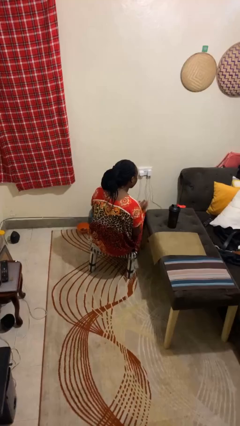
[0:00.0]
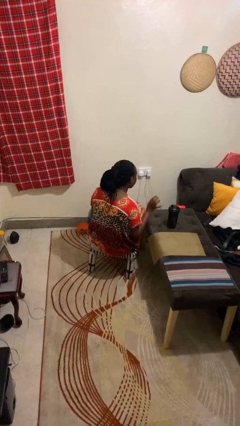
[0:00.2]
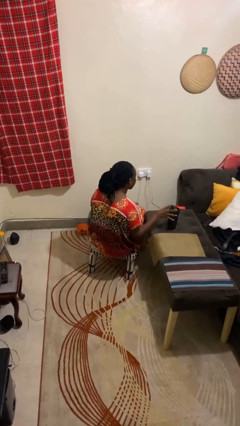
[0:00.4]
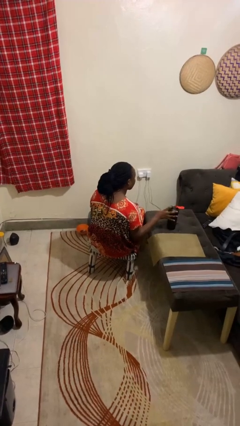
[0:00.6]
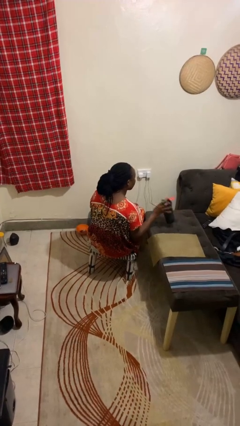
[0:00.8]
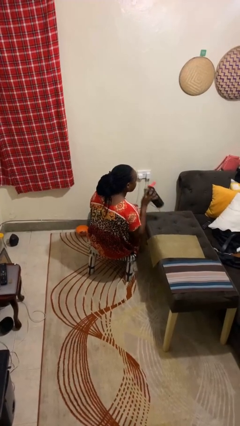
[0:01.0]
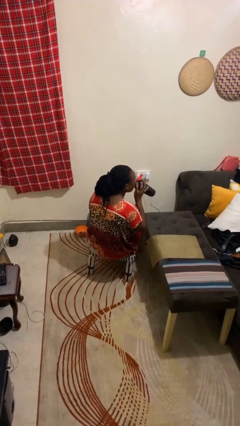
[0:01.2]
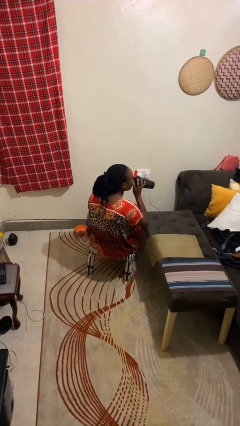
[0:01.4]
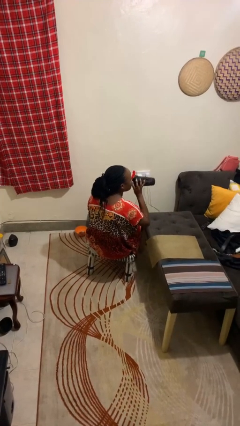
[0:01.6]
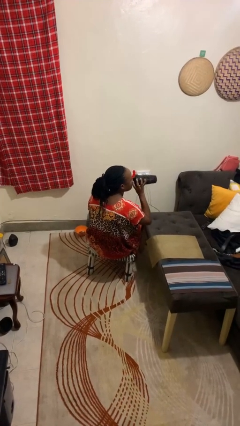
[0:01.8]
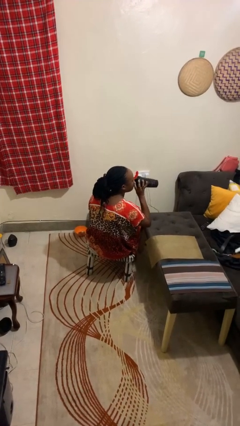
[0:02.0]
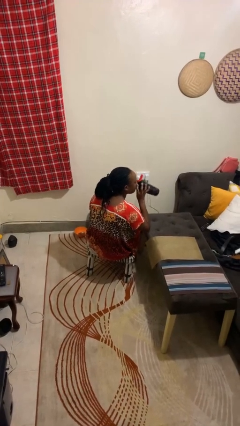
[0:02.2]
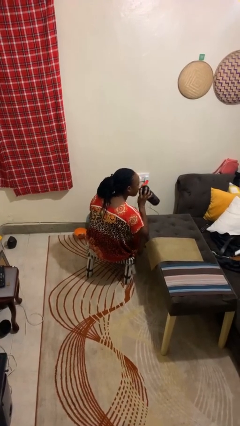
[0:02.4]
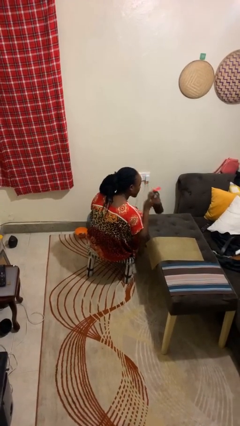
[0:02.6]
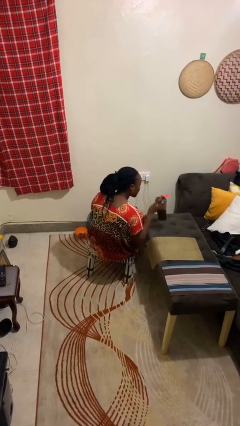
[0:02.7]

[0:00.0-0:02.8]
person drinks from cup

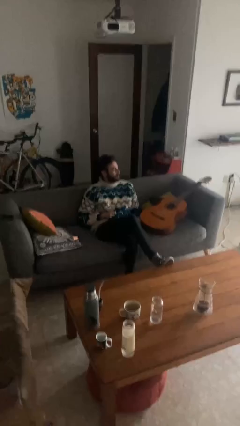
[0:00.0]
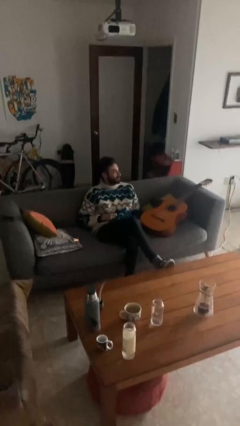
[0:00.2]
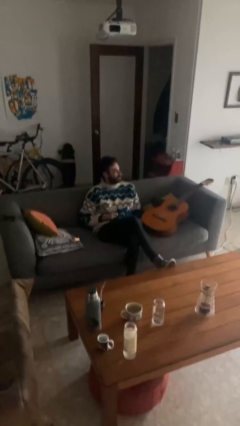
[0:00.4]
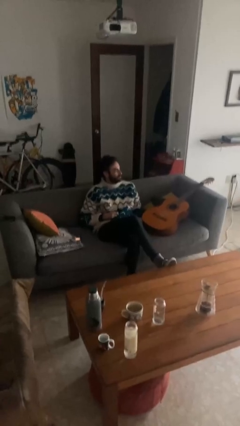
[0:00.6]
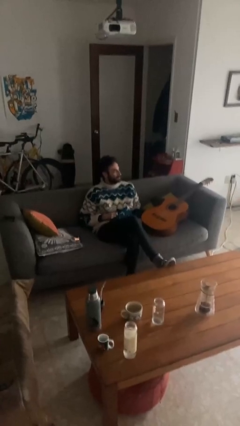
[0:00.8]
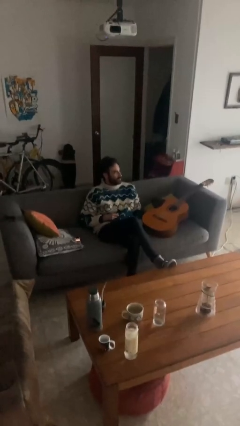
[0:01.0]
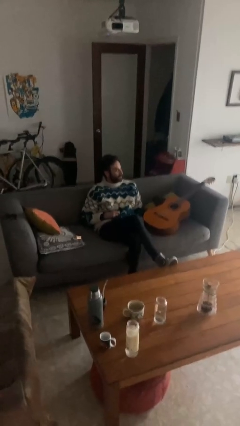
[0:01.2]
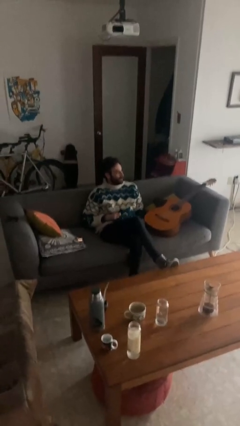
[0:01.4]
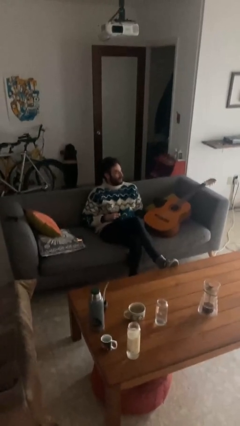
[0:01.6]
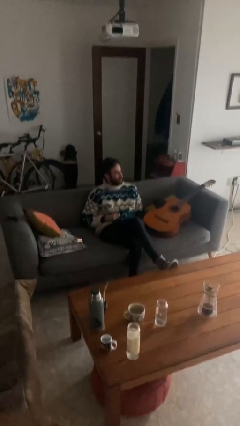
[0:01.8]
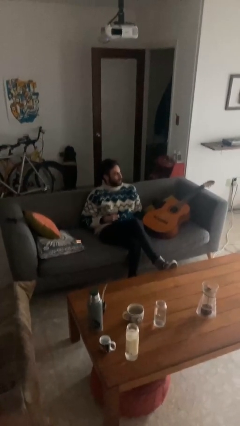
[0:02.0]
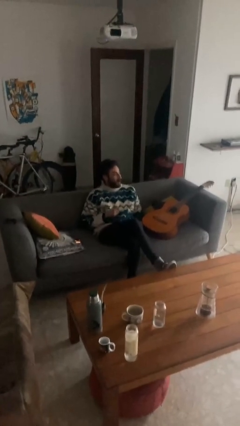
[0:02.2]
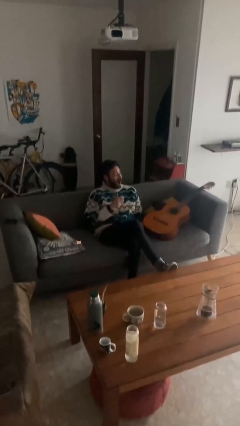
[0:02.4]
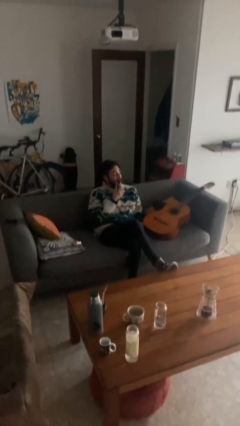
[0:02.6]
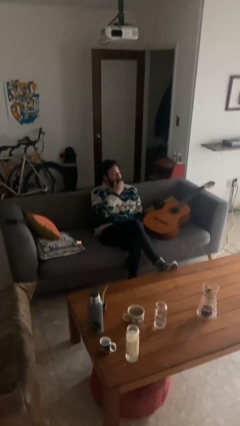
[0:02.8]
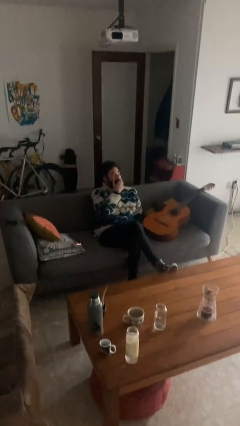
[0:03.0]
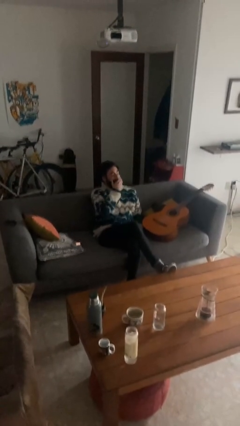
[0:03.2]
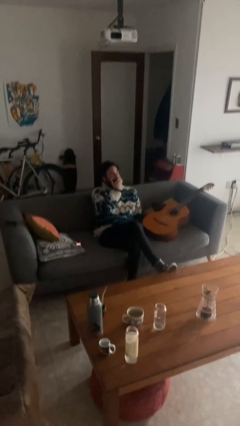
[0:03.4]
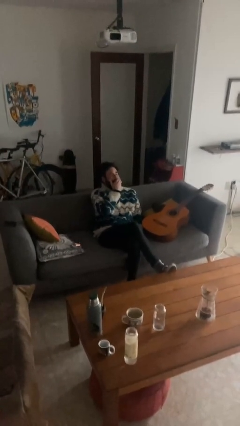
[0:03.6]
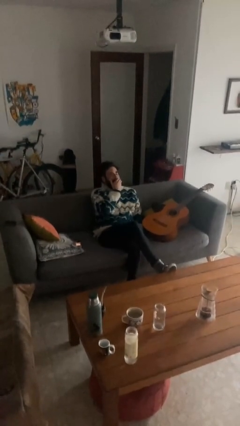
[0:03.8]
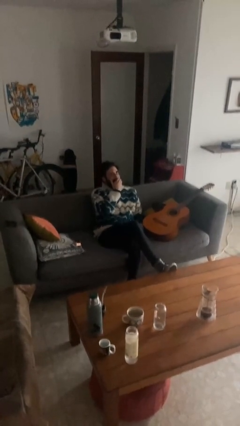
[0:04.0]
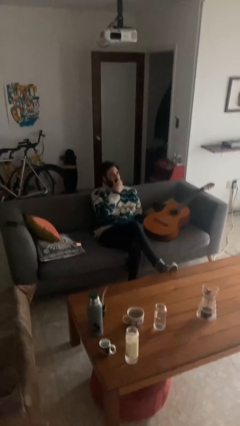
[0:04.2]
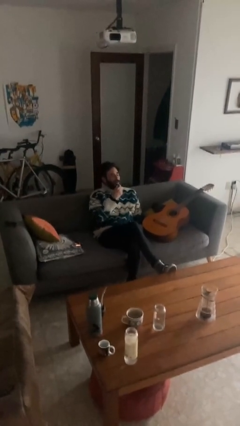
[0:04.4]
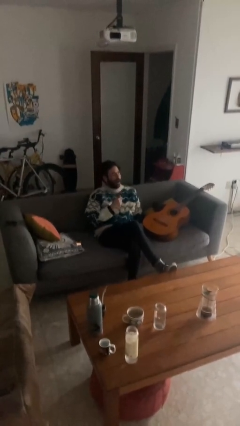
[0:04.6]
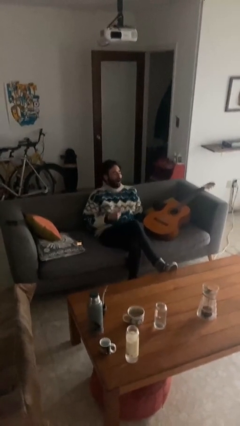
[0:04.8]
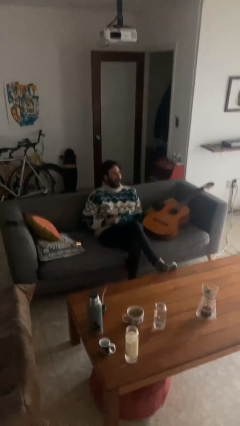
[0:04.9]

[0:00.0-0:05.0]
person yawns

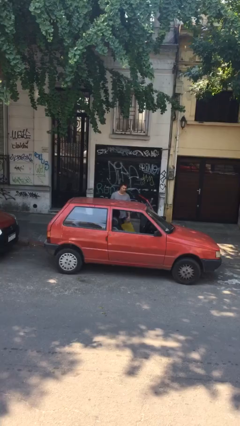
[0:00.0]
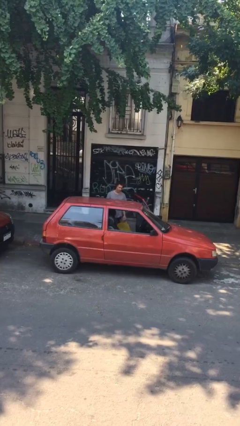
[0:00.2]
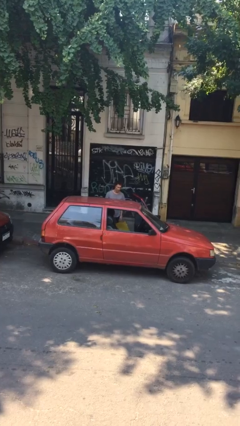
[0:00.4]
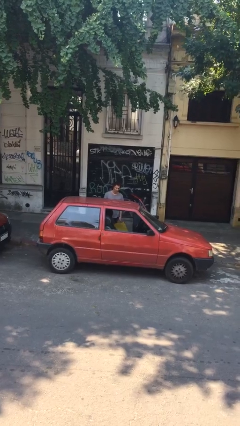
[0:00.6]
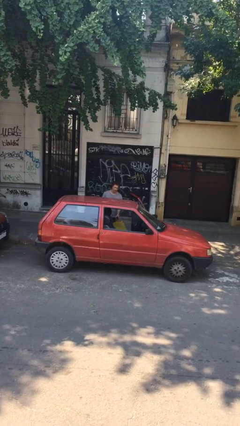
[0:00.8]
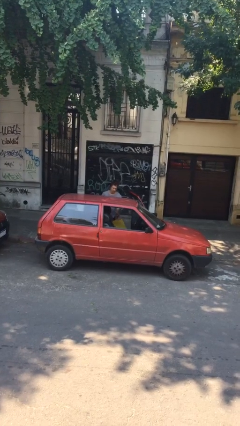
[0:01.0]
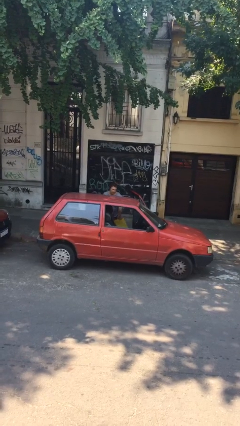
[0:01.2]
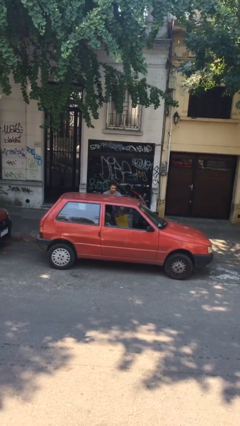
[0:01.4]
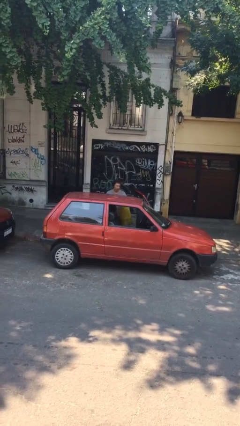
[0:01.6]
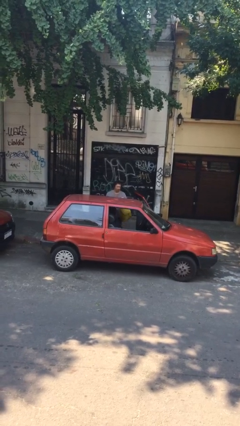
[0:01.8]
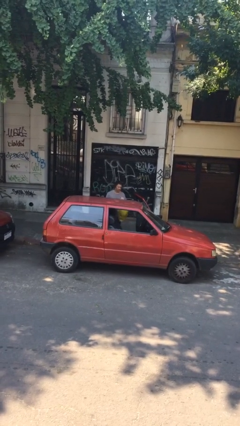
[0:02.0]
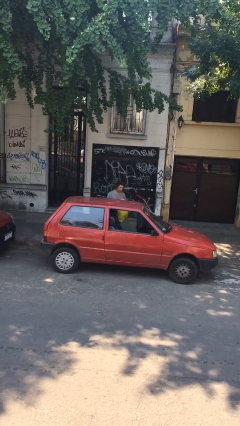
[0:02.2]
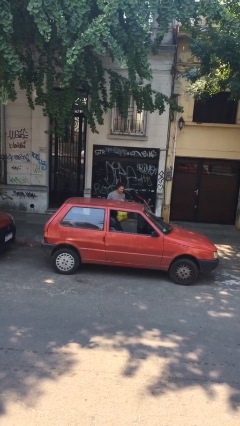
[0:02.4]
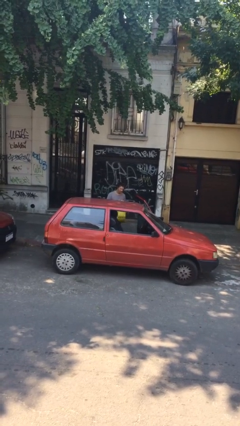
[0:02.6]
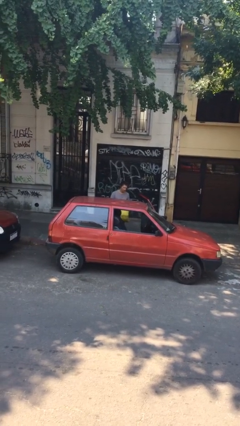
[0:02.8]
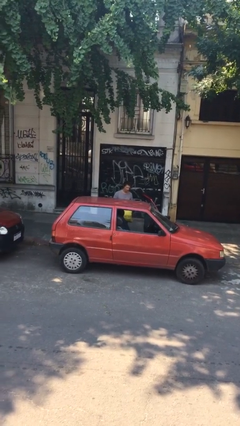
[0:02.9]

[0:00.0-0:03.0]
person unloads car

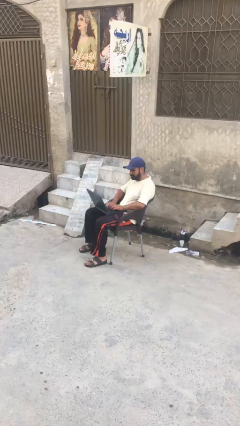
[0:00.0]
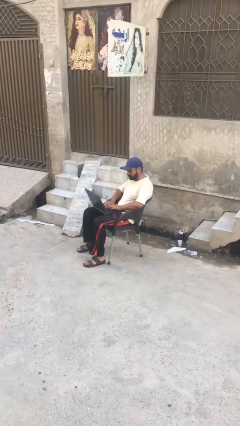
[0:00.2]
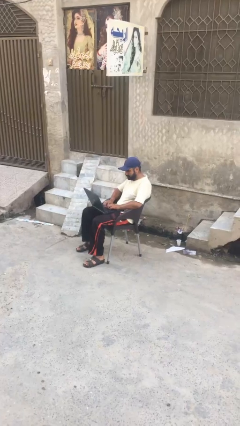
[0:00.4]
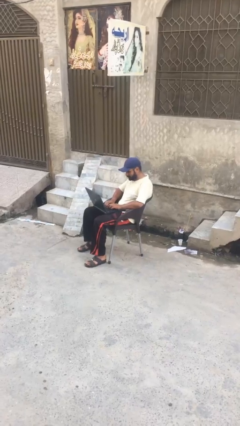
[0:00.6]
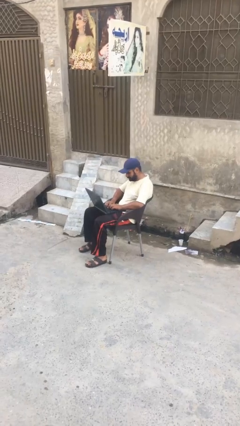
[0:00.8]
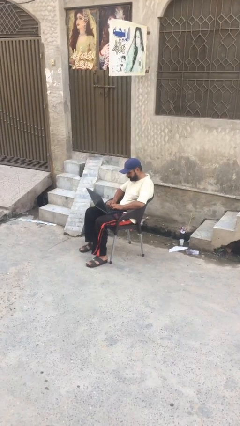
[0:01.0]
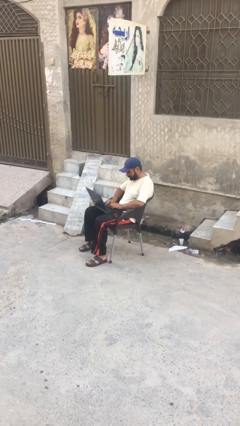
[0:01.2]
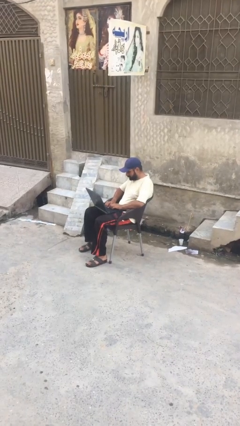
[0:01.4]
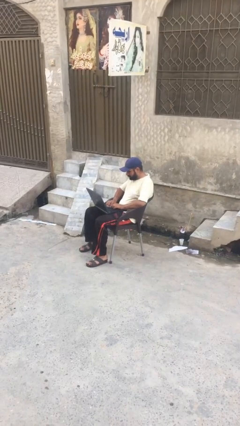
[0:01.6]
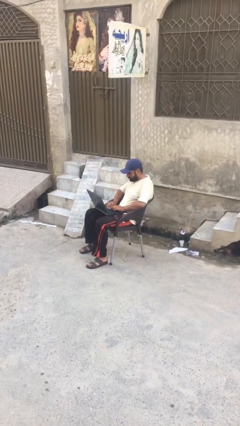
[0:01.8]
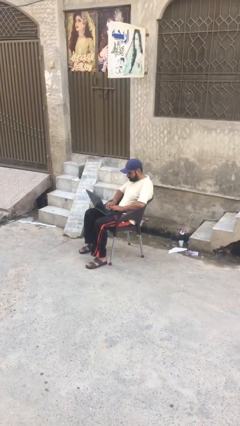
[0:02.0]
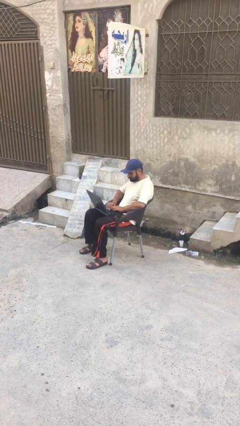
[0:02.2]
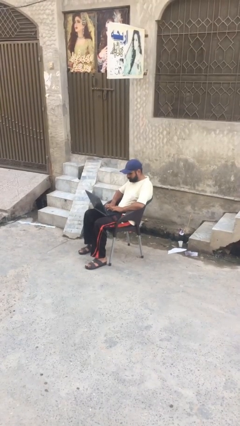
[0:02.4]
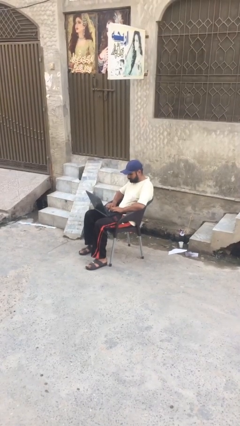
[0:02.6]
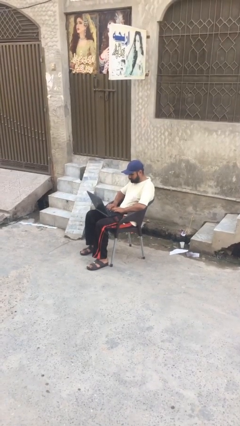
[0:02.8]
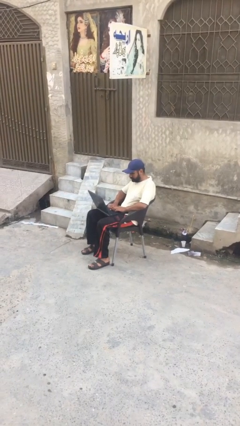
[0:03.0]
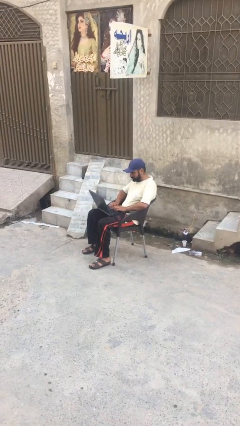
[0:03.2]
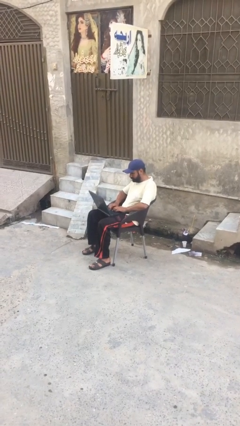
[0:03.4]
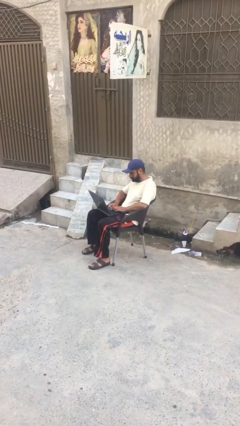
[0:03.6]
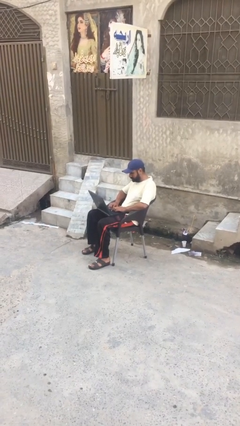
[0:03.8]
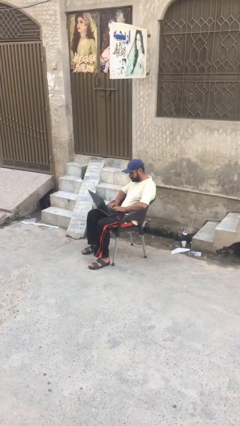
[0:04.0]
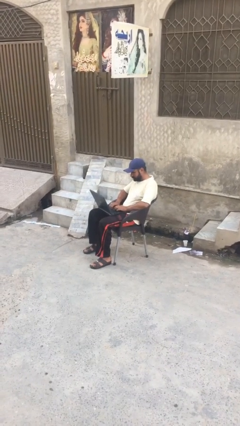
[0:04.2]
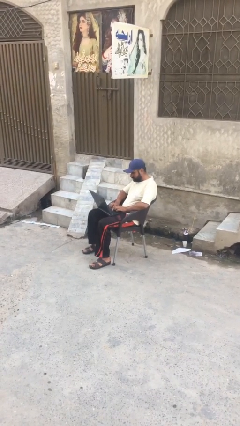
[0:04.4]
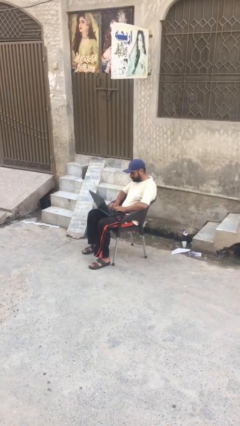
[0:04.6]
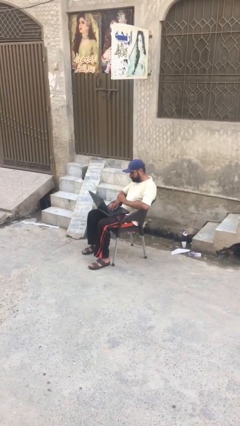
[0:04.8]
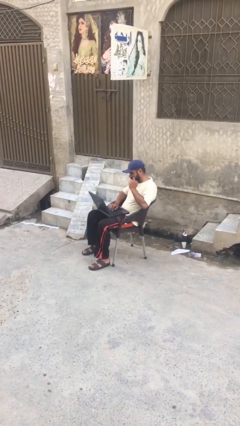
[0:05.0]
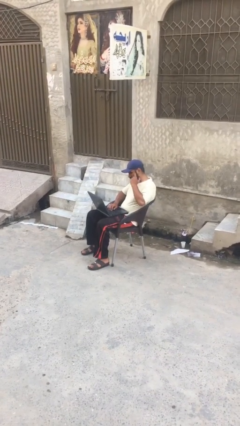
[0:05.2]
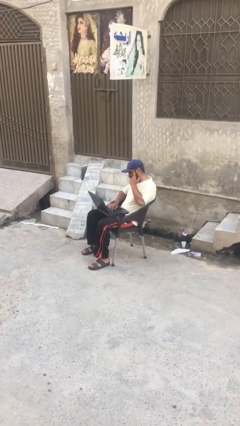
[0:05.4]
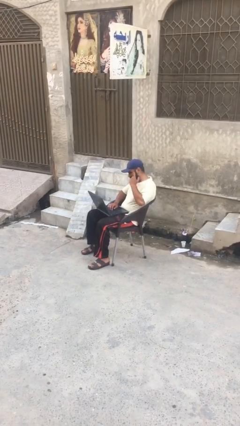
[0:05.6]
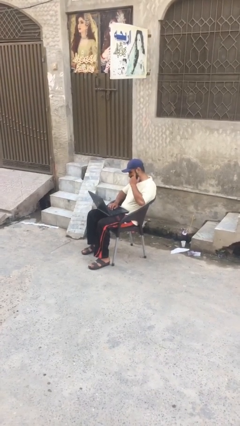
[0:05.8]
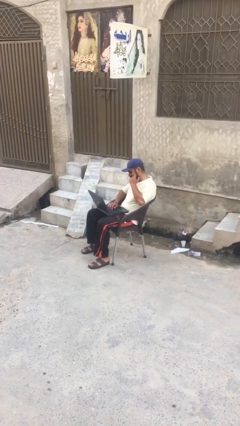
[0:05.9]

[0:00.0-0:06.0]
person interacts with laptop

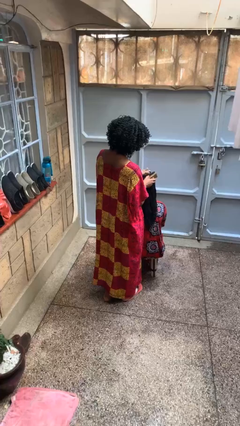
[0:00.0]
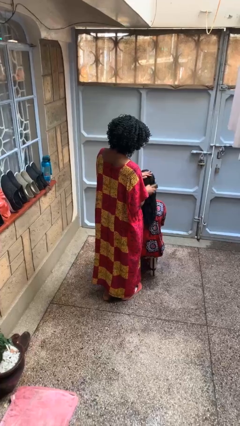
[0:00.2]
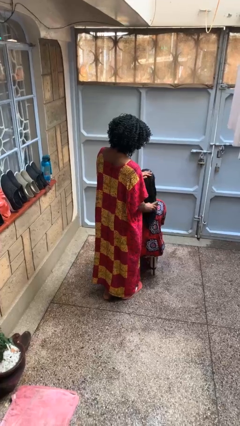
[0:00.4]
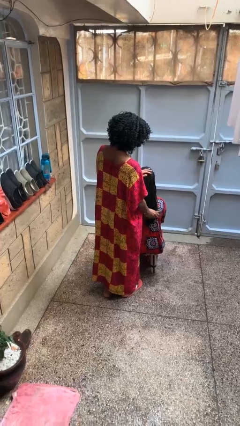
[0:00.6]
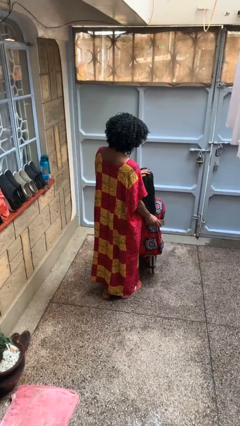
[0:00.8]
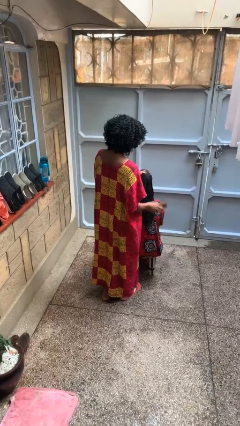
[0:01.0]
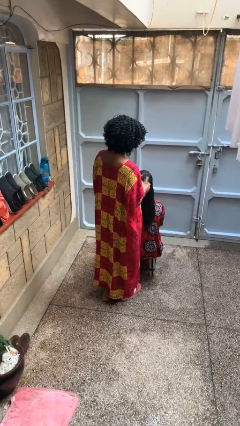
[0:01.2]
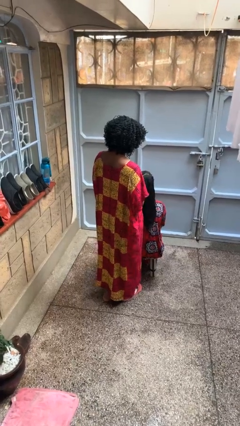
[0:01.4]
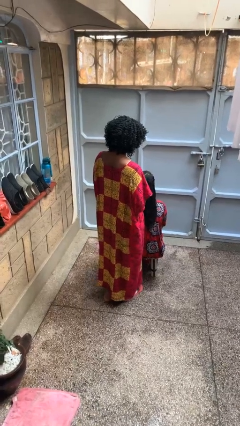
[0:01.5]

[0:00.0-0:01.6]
person brushes hair of person
